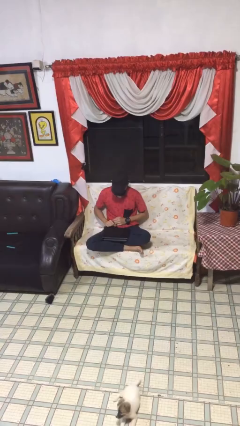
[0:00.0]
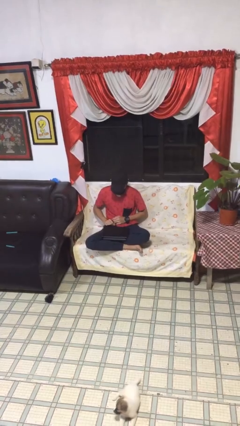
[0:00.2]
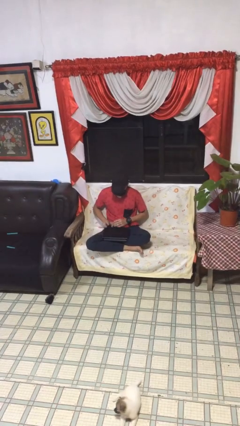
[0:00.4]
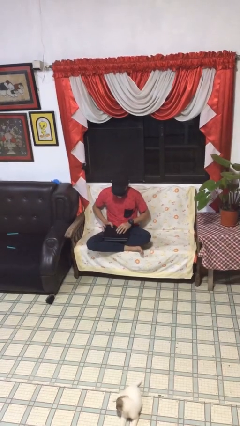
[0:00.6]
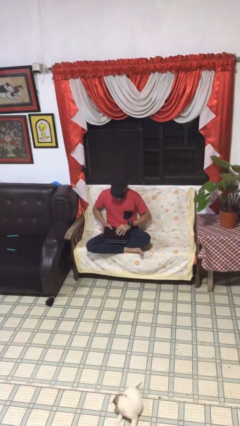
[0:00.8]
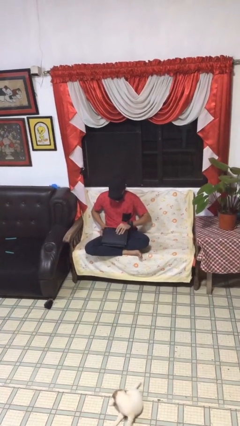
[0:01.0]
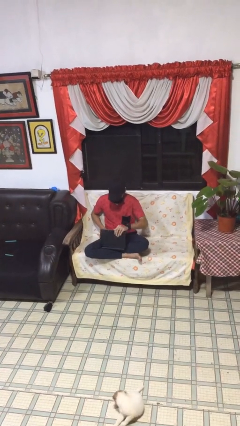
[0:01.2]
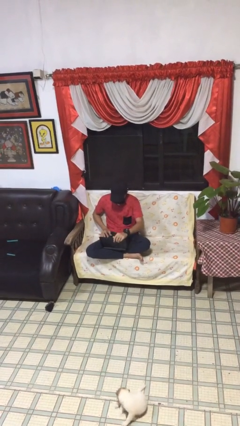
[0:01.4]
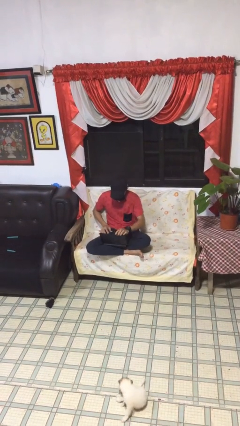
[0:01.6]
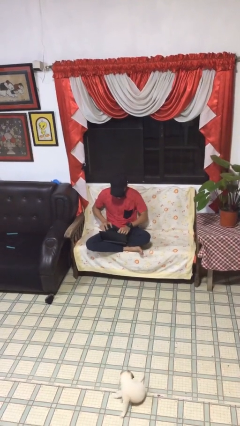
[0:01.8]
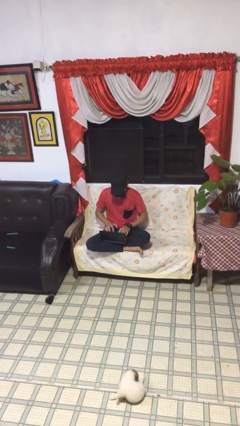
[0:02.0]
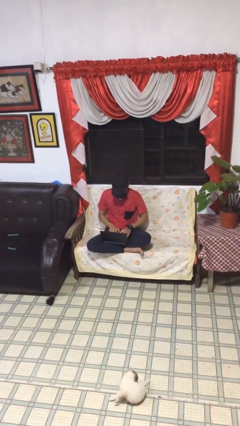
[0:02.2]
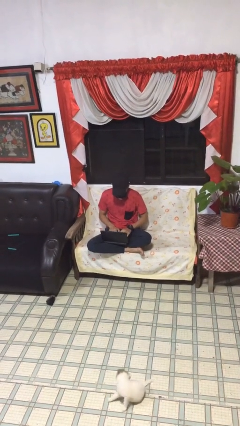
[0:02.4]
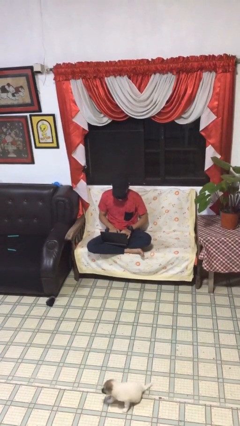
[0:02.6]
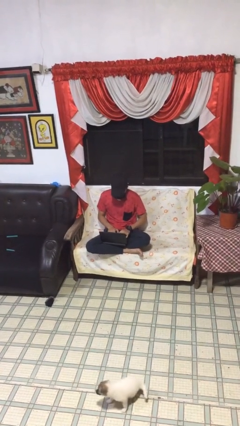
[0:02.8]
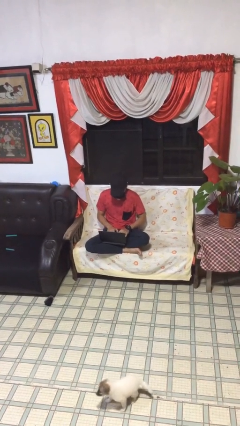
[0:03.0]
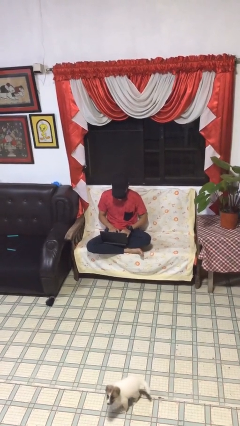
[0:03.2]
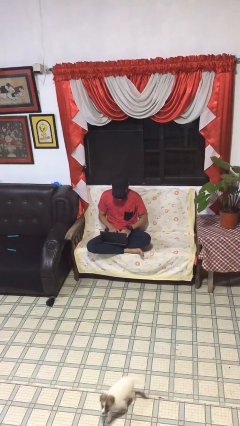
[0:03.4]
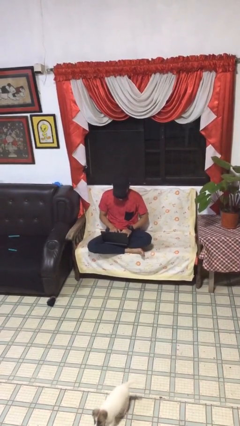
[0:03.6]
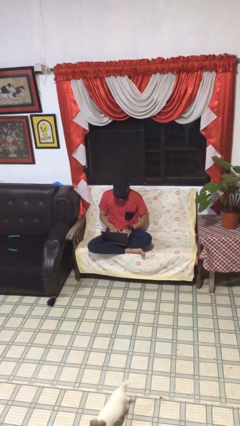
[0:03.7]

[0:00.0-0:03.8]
person interacts with laptop

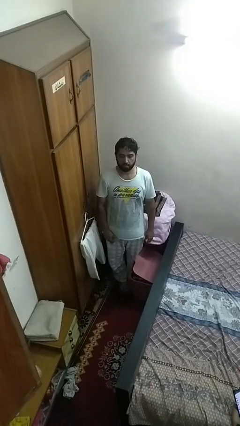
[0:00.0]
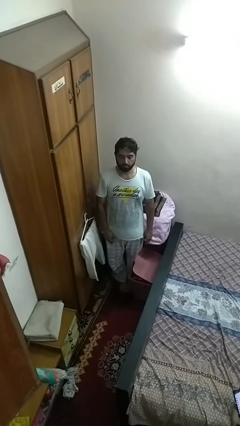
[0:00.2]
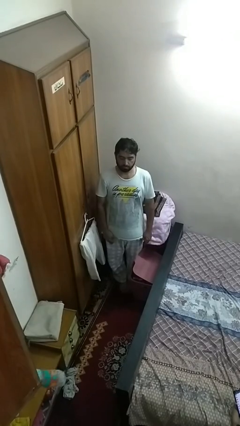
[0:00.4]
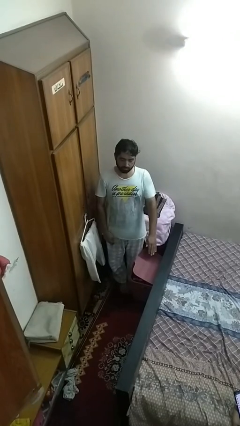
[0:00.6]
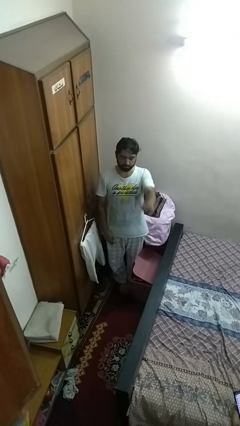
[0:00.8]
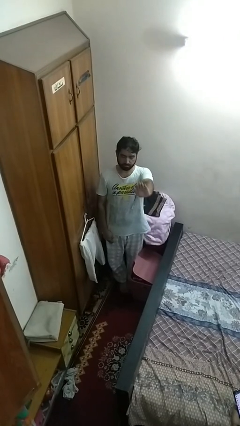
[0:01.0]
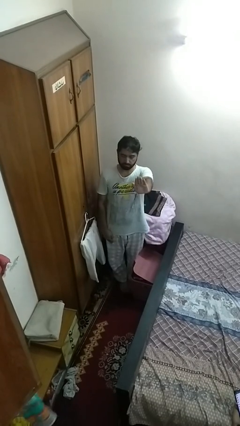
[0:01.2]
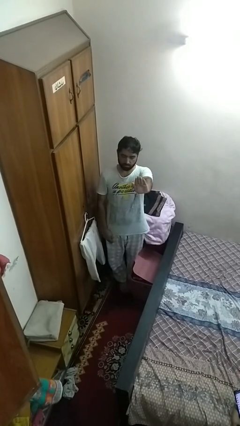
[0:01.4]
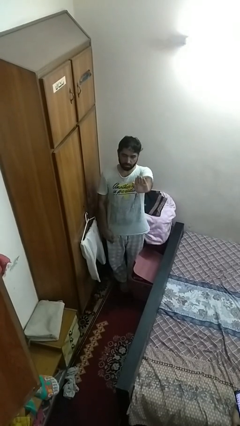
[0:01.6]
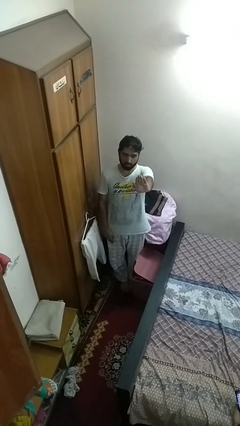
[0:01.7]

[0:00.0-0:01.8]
person gestures stop

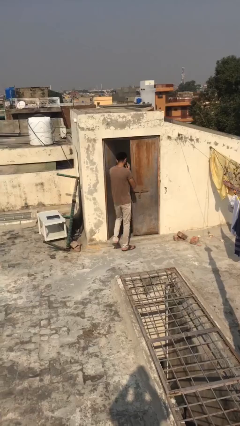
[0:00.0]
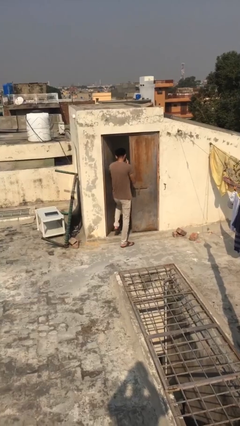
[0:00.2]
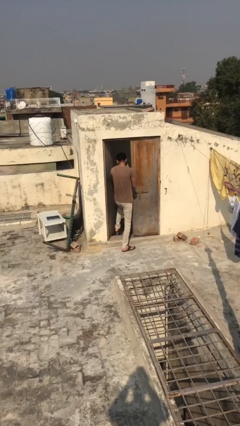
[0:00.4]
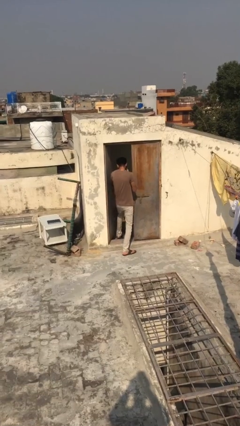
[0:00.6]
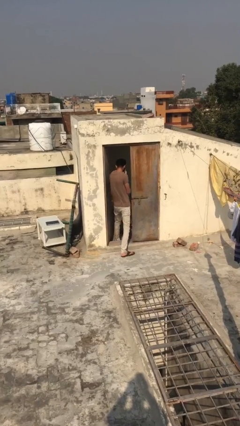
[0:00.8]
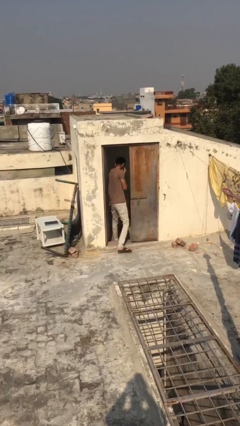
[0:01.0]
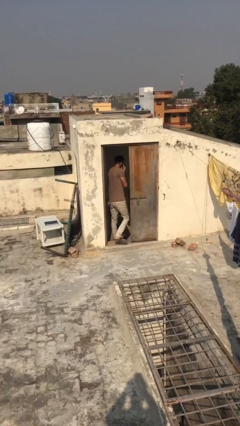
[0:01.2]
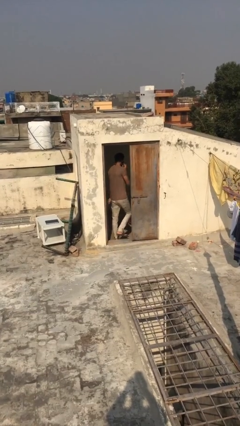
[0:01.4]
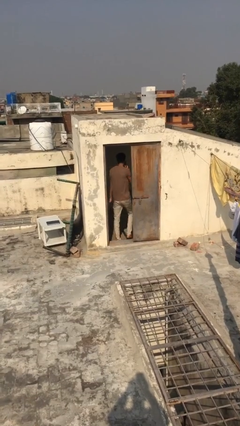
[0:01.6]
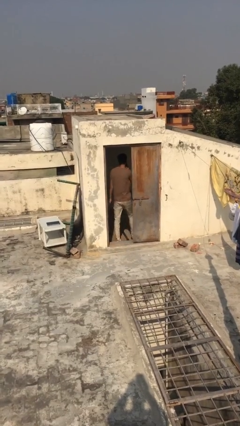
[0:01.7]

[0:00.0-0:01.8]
person exits scene through structure

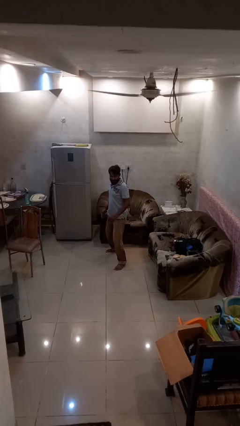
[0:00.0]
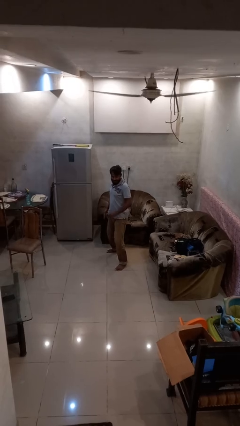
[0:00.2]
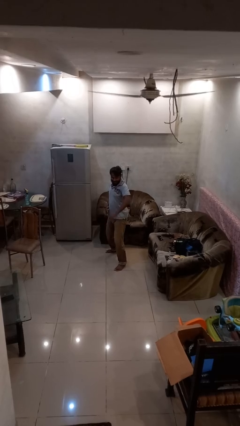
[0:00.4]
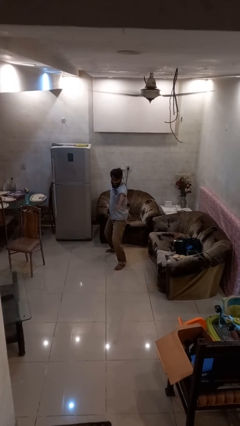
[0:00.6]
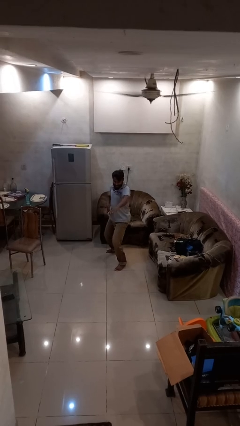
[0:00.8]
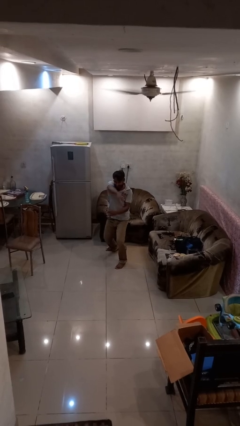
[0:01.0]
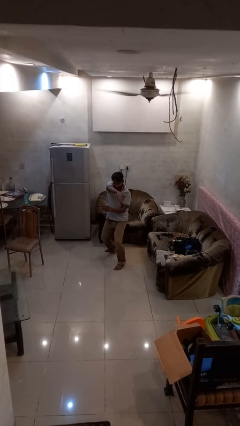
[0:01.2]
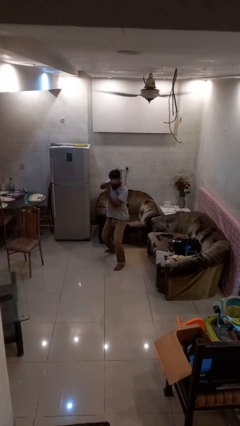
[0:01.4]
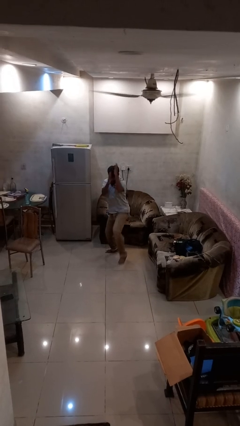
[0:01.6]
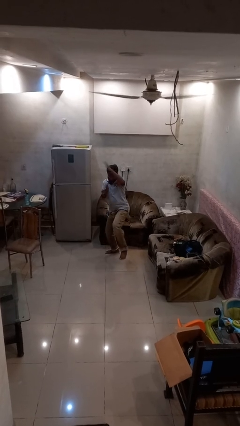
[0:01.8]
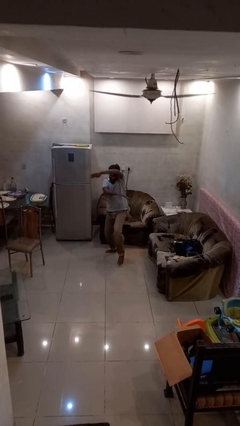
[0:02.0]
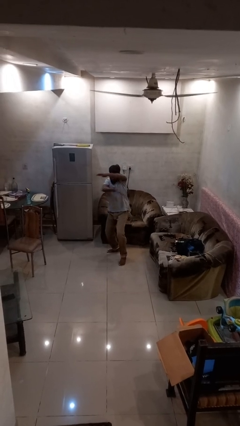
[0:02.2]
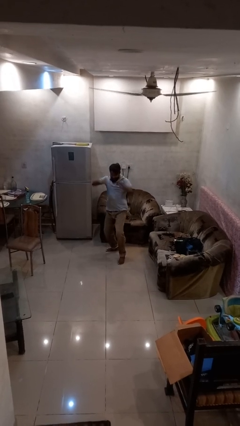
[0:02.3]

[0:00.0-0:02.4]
person karate chop

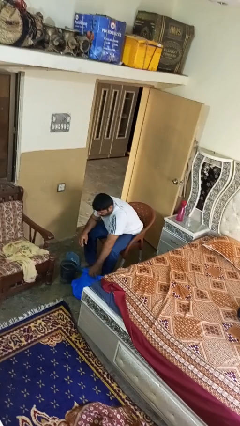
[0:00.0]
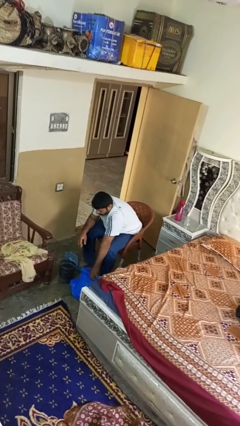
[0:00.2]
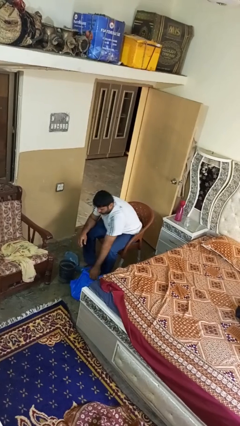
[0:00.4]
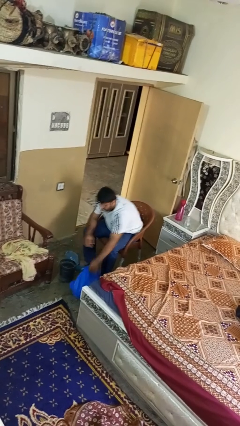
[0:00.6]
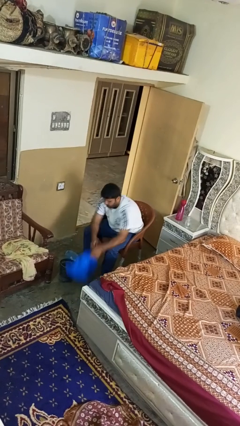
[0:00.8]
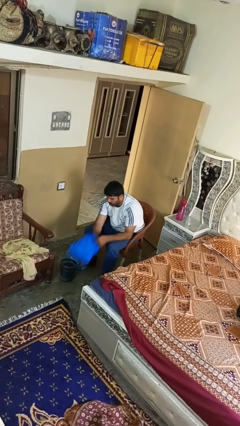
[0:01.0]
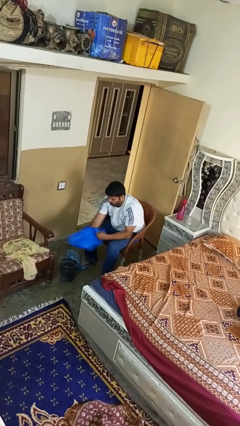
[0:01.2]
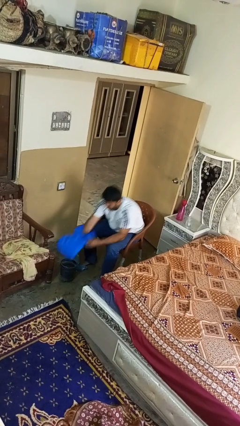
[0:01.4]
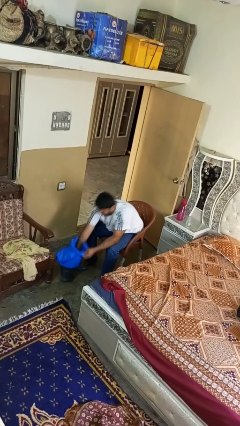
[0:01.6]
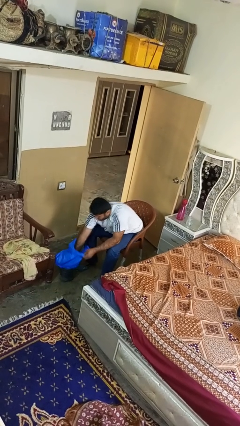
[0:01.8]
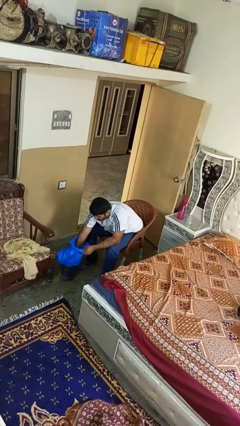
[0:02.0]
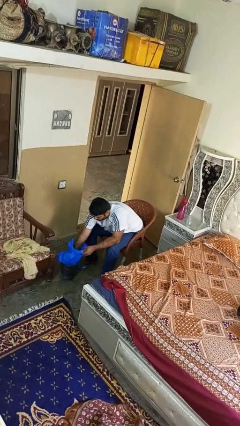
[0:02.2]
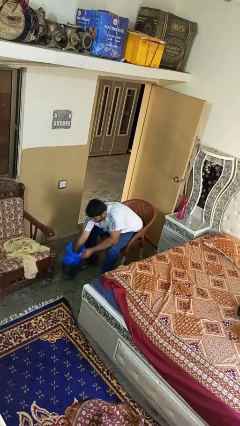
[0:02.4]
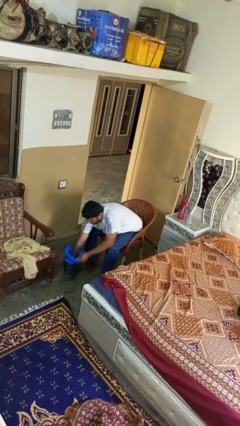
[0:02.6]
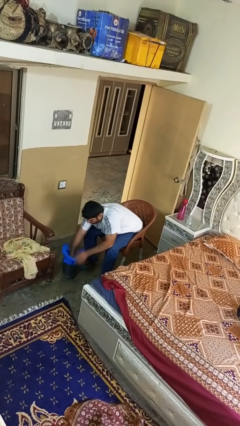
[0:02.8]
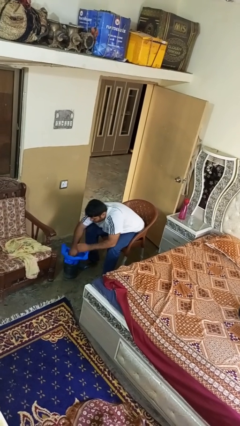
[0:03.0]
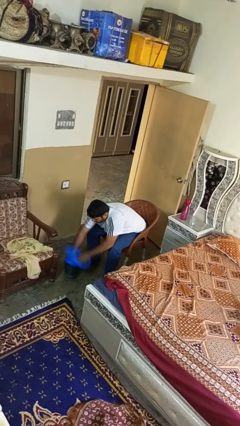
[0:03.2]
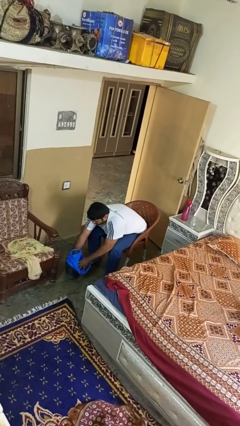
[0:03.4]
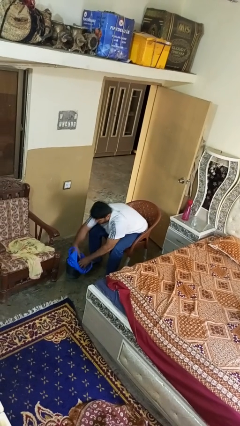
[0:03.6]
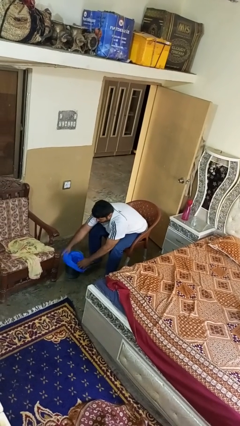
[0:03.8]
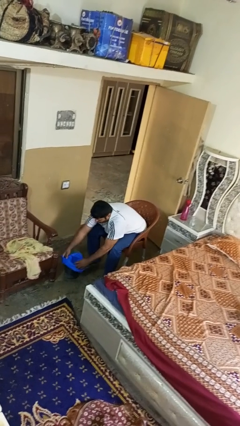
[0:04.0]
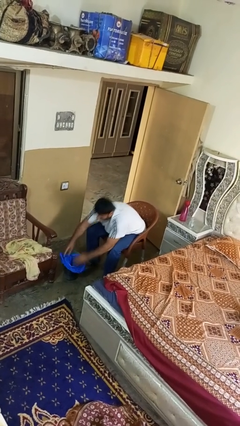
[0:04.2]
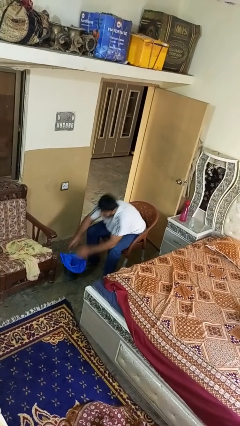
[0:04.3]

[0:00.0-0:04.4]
person inserts trashbag into trashcan

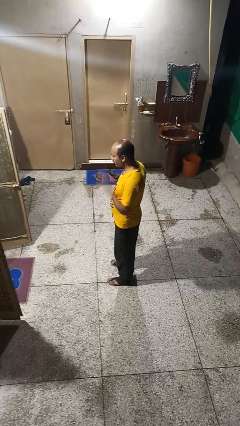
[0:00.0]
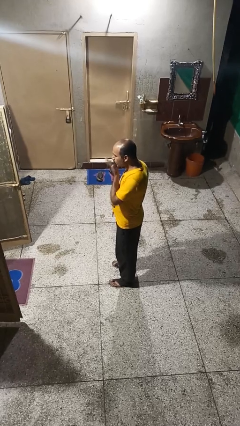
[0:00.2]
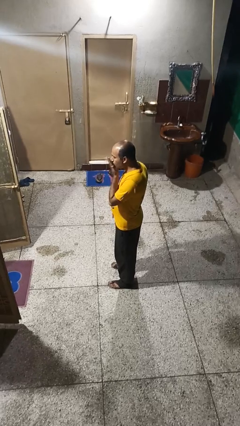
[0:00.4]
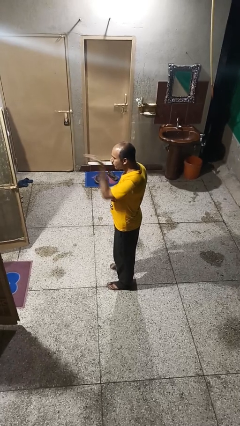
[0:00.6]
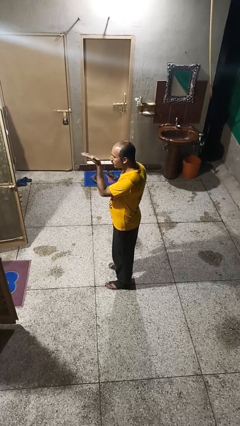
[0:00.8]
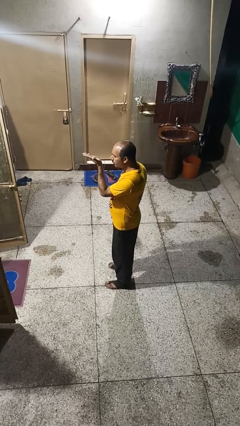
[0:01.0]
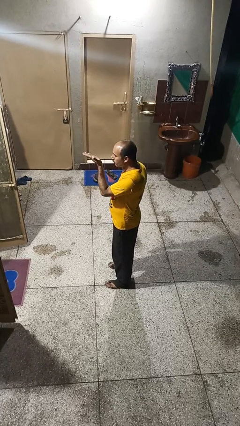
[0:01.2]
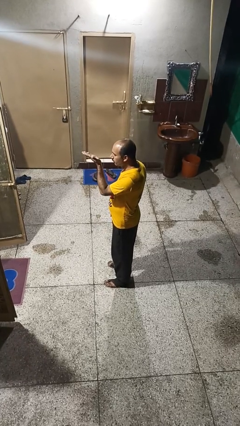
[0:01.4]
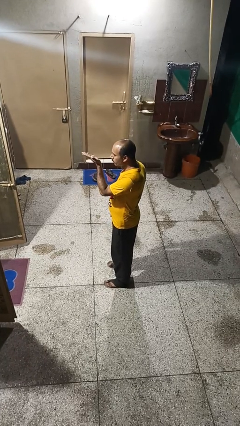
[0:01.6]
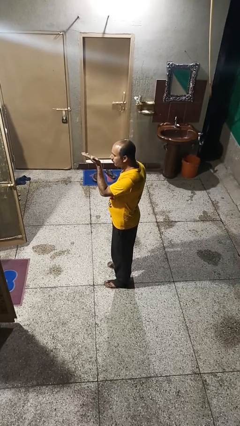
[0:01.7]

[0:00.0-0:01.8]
person gestures blow kiss

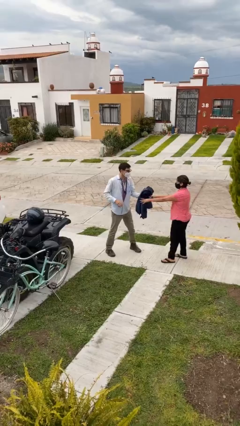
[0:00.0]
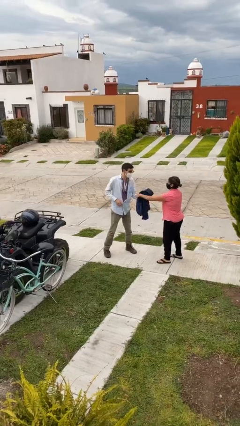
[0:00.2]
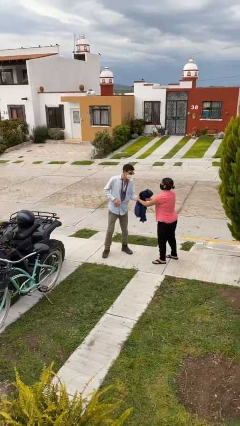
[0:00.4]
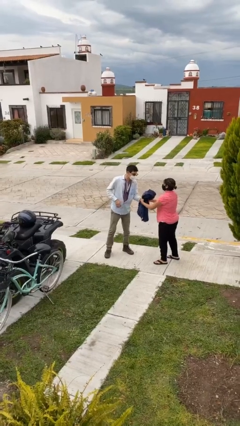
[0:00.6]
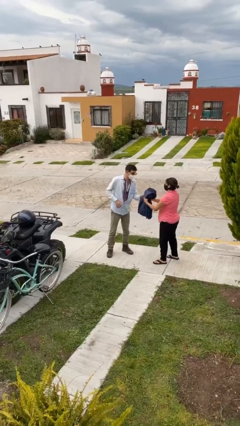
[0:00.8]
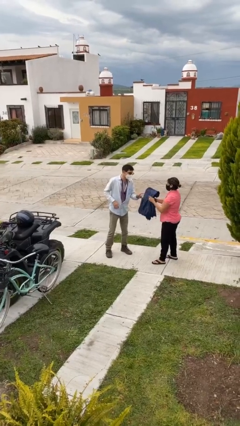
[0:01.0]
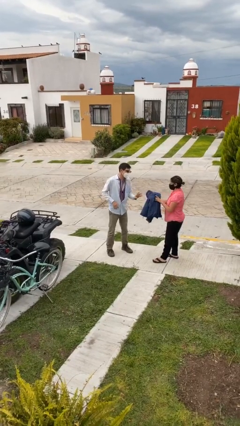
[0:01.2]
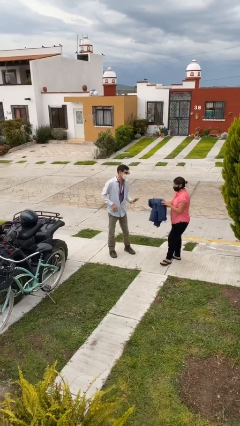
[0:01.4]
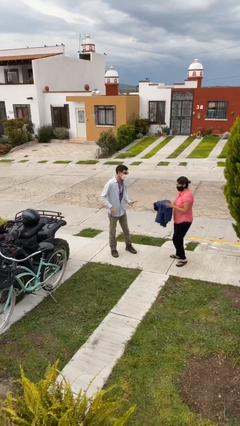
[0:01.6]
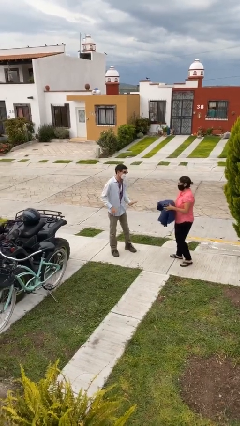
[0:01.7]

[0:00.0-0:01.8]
person transfers object to person
